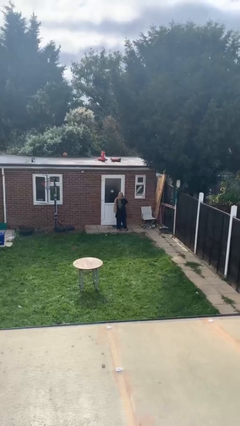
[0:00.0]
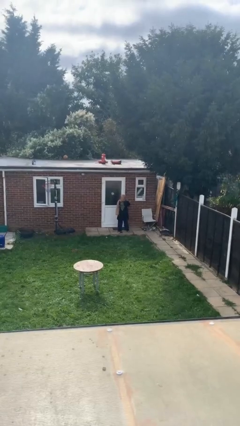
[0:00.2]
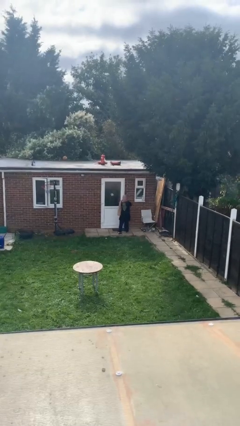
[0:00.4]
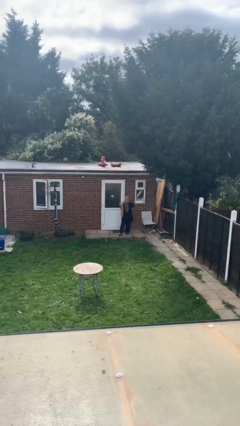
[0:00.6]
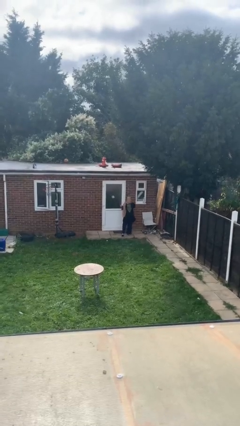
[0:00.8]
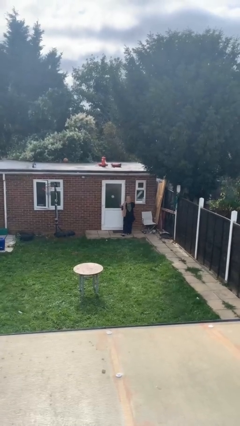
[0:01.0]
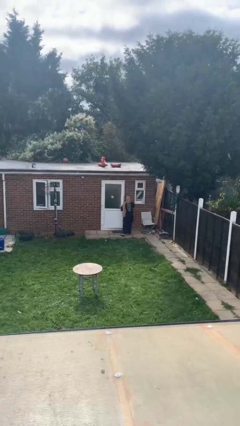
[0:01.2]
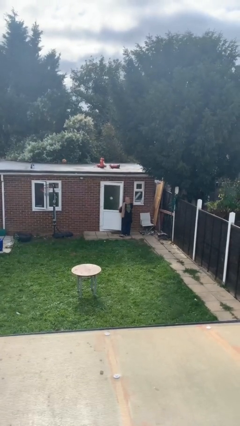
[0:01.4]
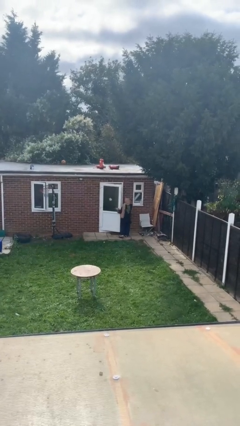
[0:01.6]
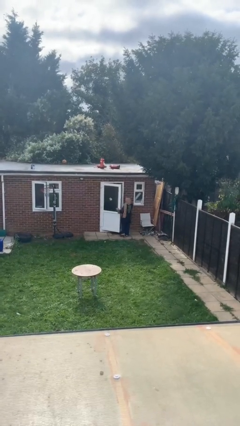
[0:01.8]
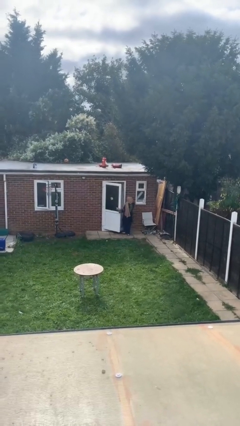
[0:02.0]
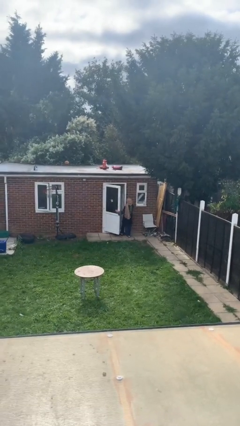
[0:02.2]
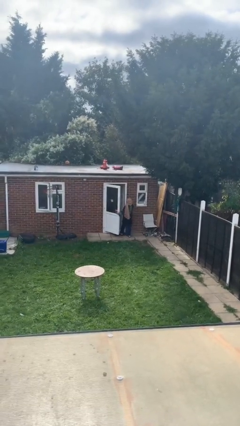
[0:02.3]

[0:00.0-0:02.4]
person opens facility door

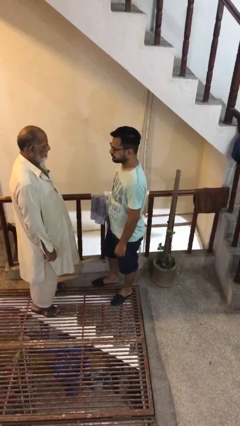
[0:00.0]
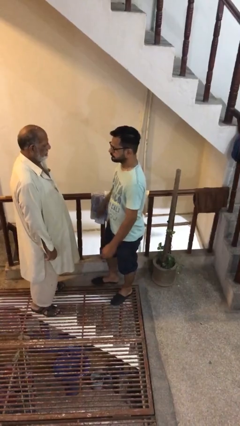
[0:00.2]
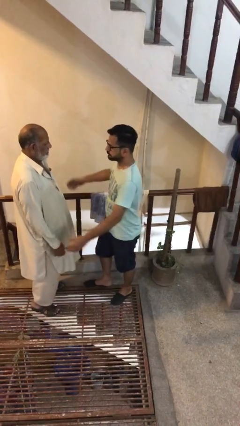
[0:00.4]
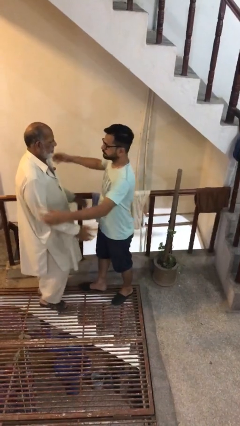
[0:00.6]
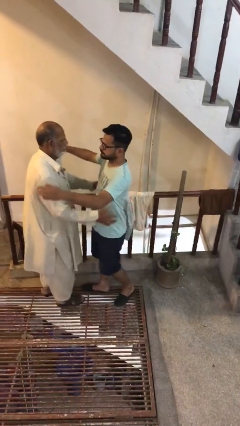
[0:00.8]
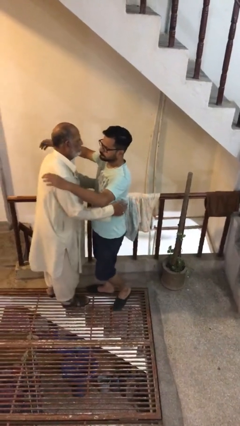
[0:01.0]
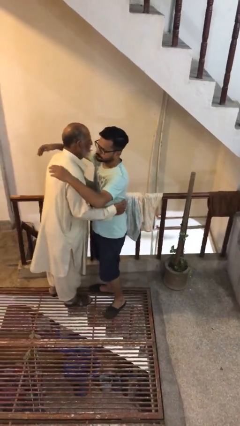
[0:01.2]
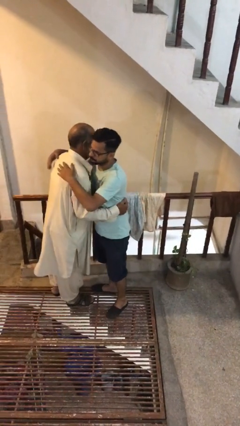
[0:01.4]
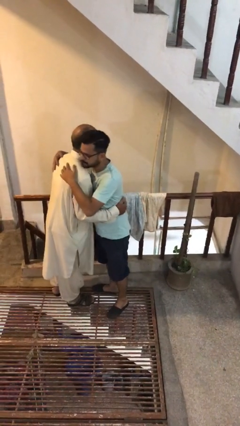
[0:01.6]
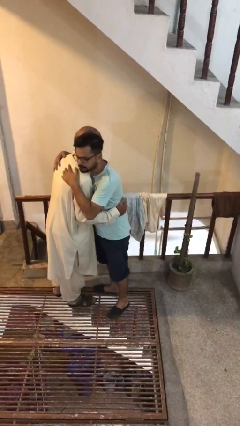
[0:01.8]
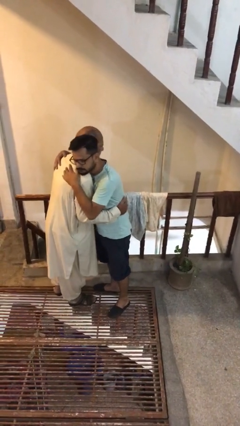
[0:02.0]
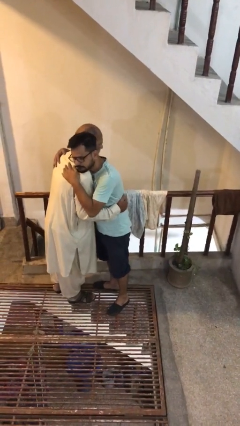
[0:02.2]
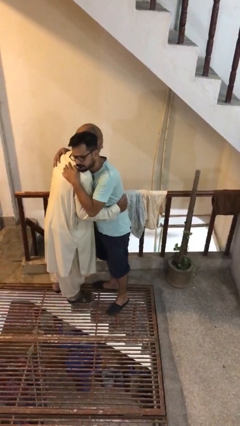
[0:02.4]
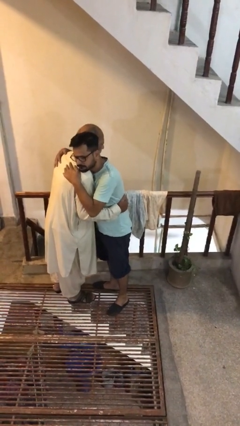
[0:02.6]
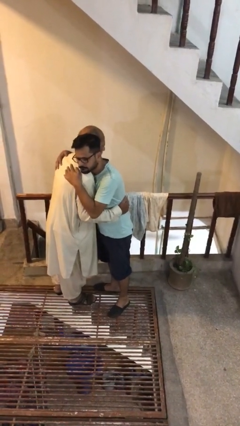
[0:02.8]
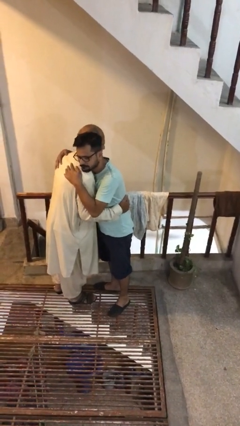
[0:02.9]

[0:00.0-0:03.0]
person embraces person

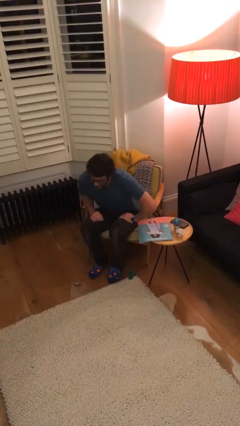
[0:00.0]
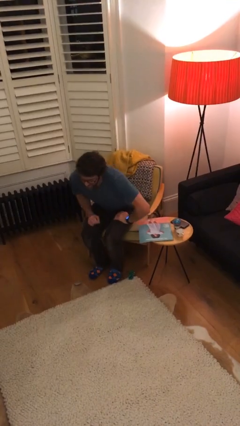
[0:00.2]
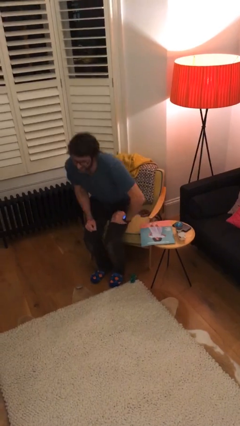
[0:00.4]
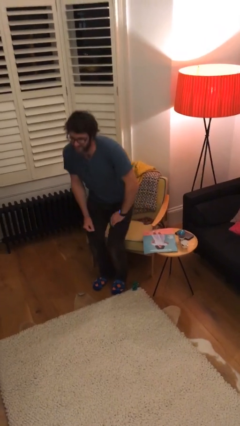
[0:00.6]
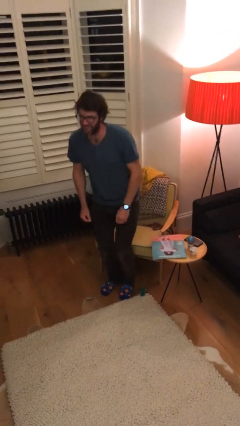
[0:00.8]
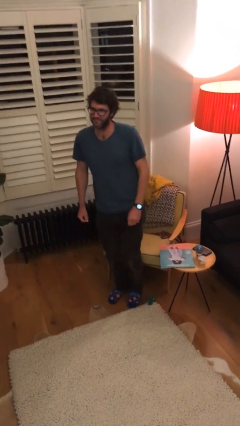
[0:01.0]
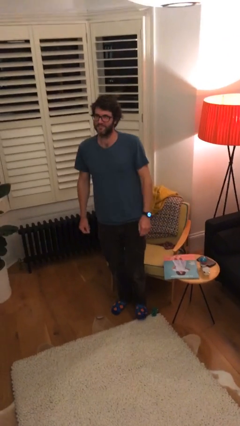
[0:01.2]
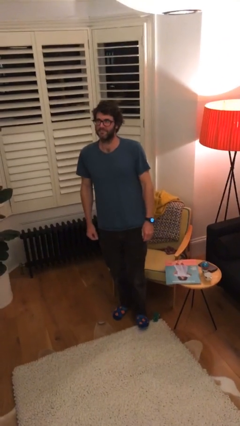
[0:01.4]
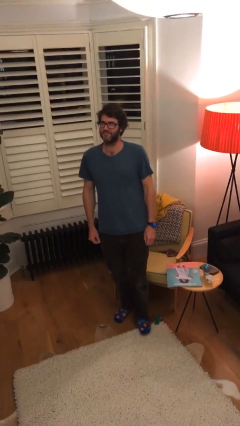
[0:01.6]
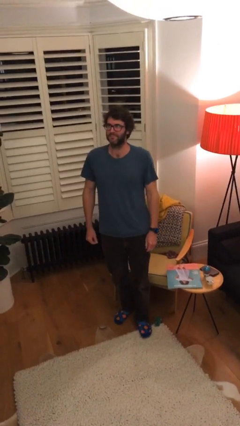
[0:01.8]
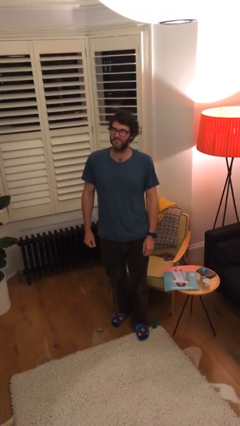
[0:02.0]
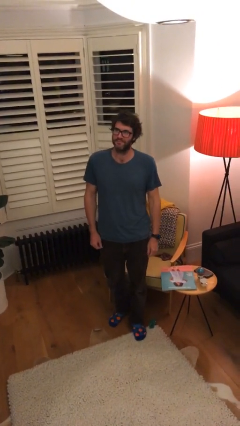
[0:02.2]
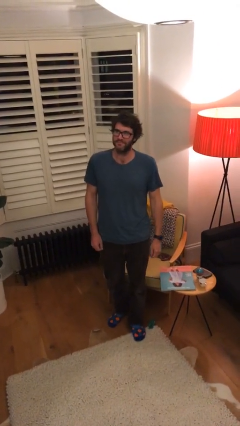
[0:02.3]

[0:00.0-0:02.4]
person stands up

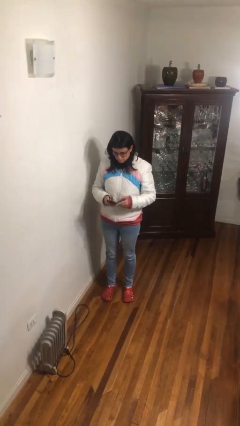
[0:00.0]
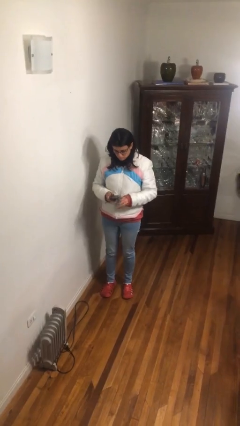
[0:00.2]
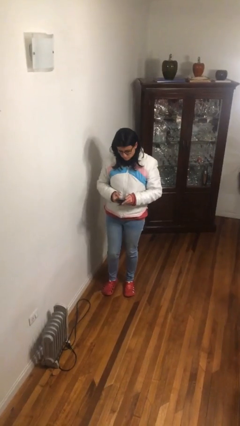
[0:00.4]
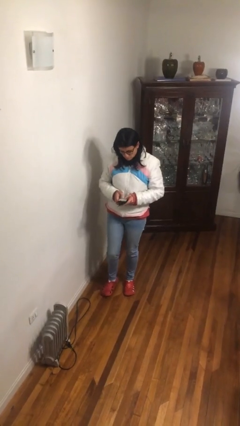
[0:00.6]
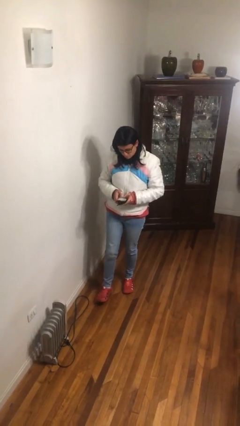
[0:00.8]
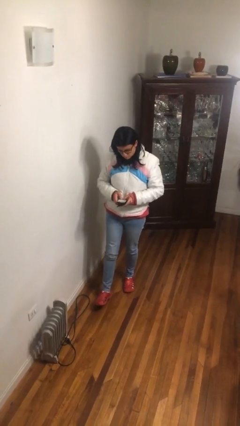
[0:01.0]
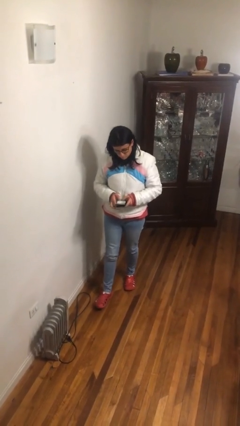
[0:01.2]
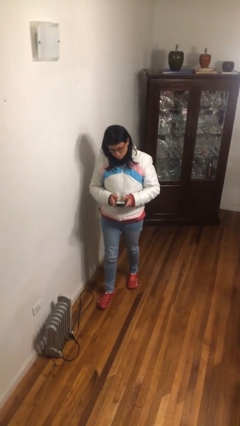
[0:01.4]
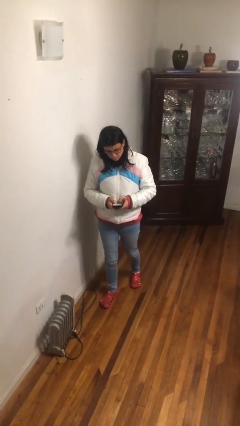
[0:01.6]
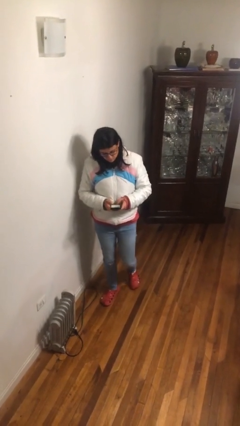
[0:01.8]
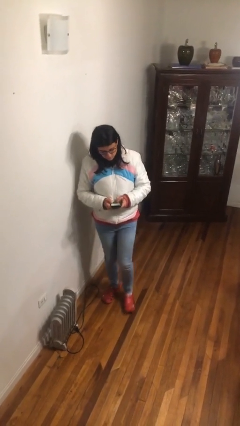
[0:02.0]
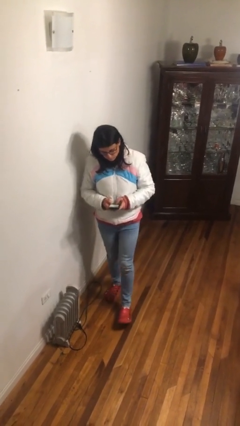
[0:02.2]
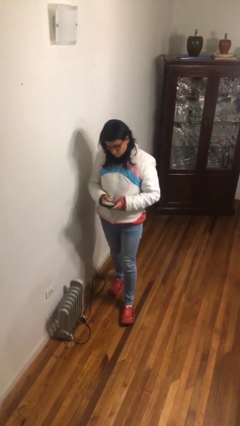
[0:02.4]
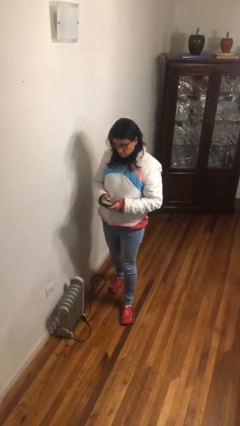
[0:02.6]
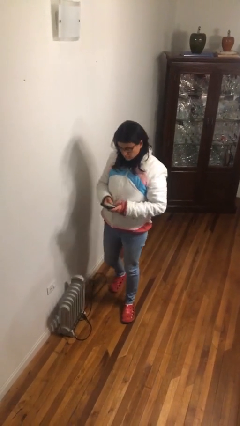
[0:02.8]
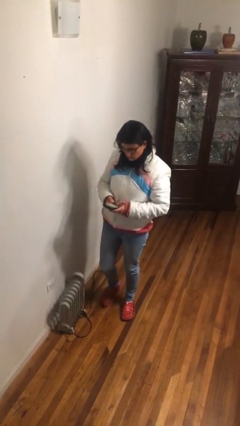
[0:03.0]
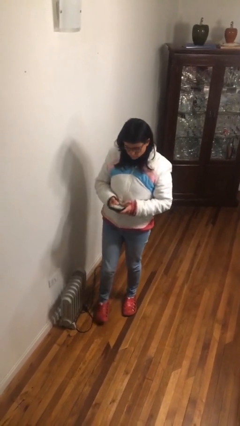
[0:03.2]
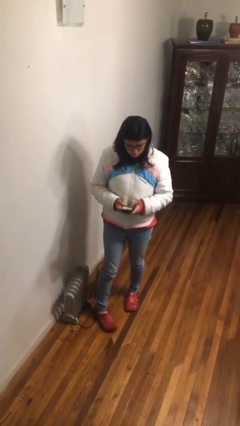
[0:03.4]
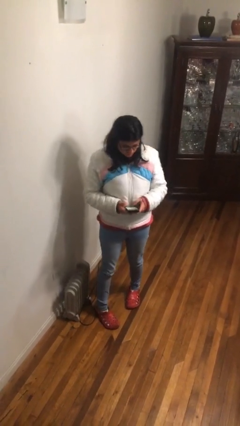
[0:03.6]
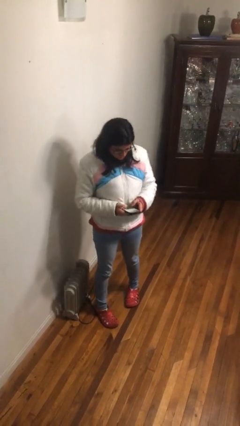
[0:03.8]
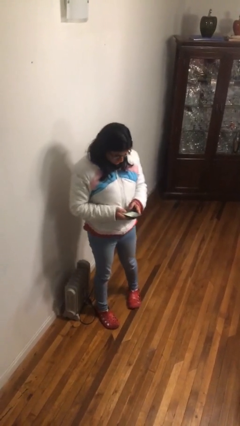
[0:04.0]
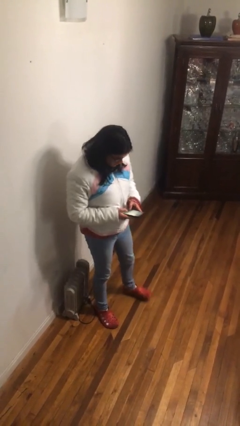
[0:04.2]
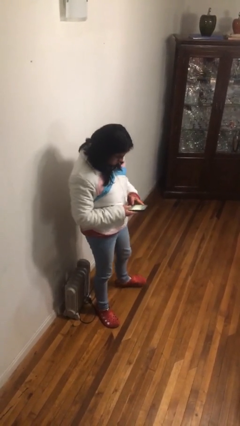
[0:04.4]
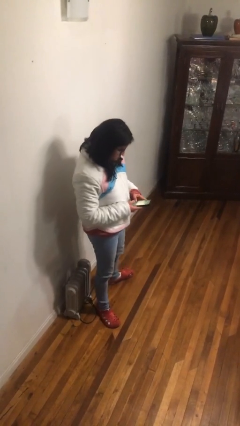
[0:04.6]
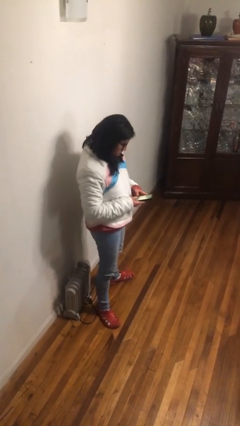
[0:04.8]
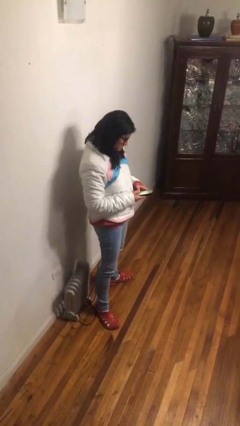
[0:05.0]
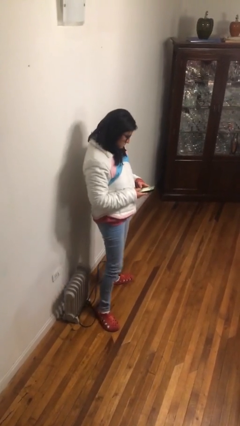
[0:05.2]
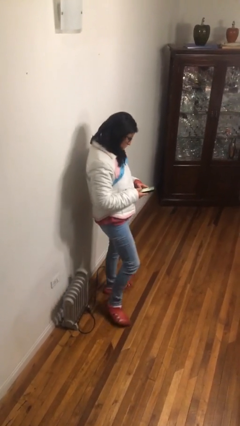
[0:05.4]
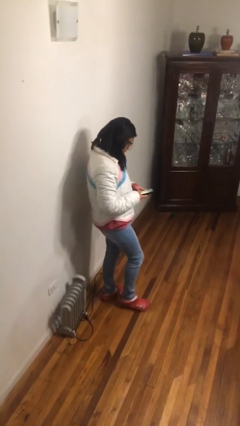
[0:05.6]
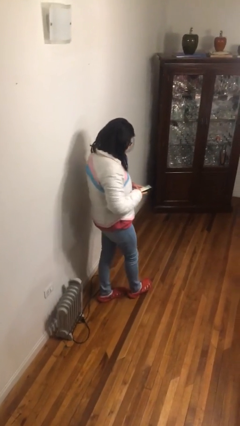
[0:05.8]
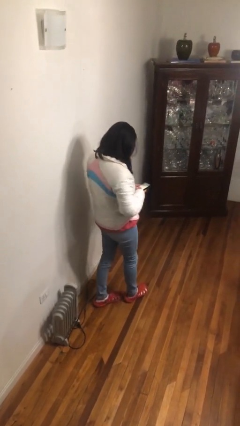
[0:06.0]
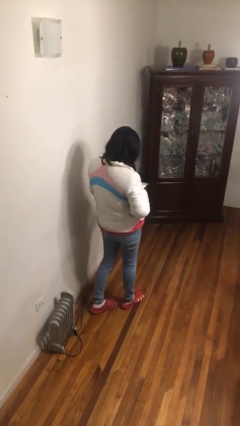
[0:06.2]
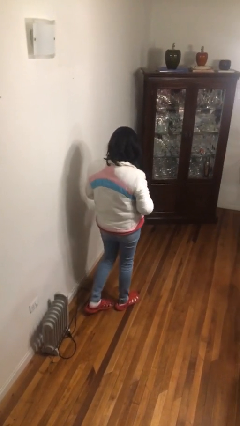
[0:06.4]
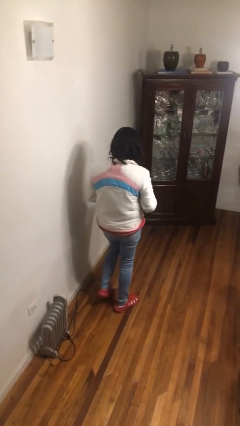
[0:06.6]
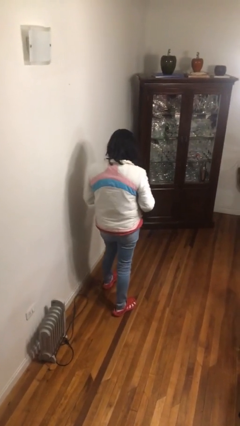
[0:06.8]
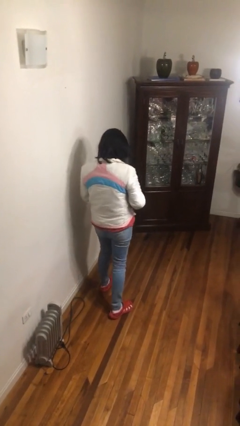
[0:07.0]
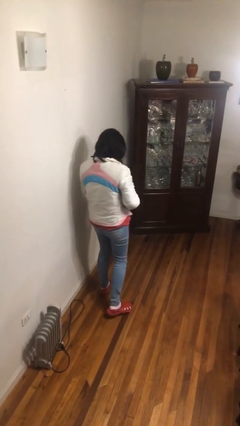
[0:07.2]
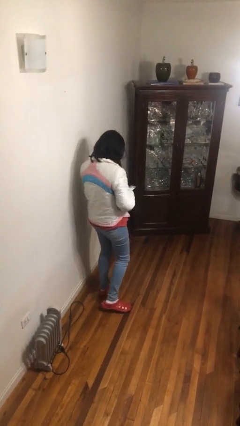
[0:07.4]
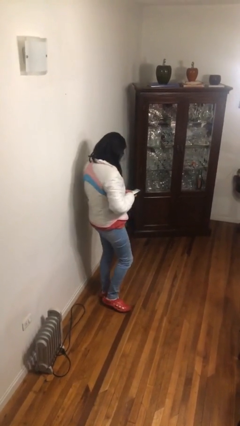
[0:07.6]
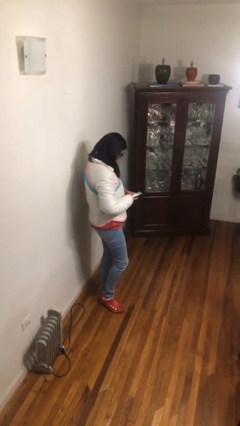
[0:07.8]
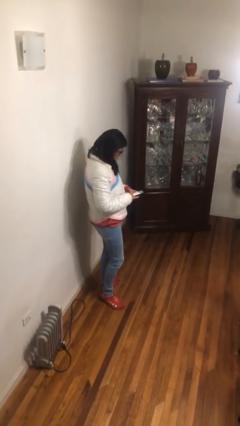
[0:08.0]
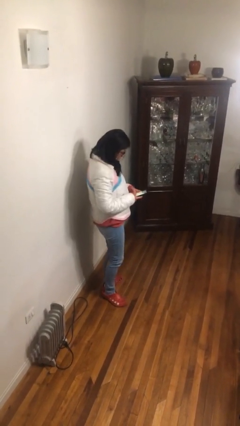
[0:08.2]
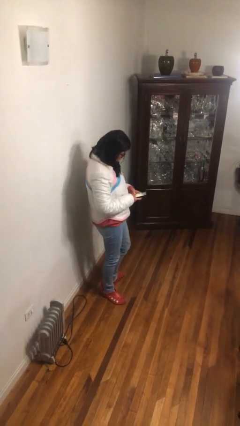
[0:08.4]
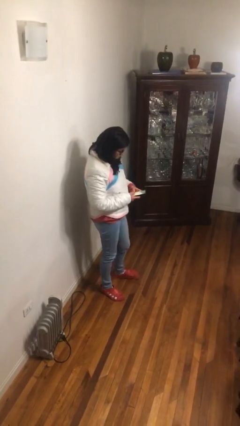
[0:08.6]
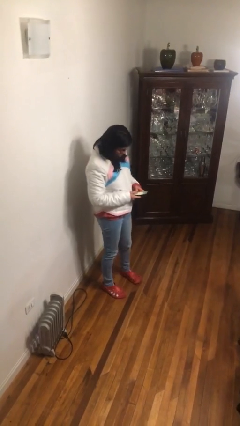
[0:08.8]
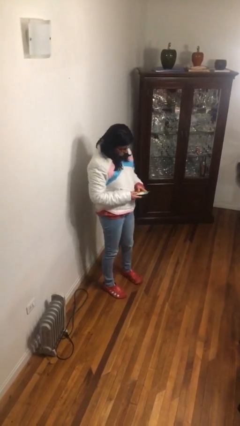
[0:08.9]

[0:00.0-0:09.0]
person texts on phone

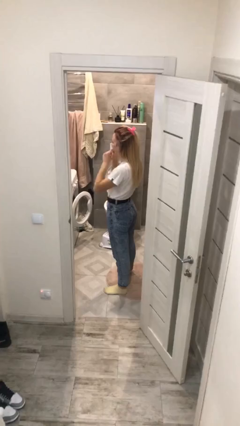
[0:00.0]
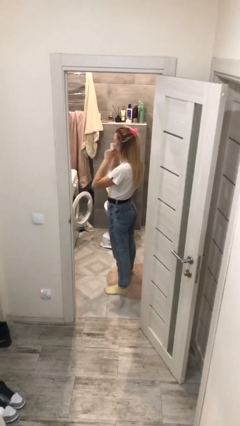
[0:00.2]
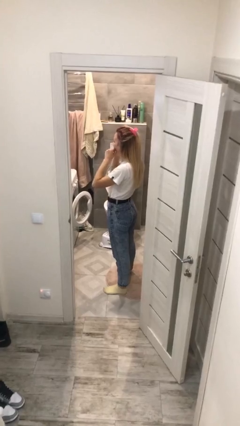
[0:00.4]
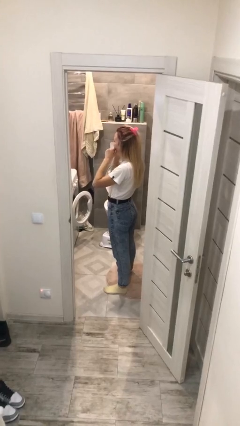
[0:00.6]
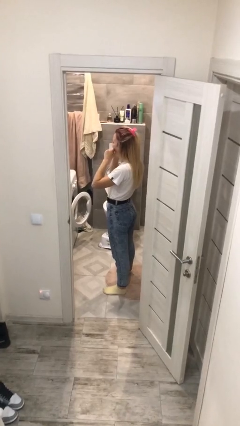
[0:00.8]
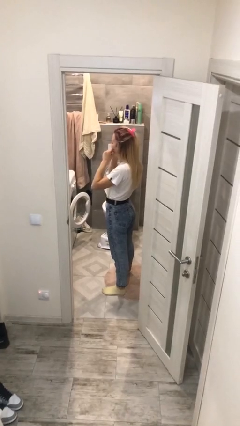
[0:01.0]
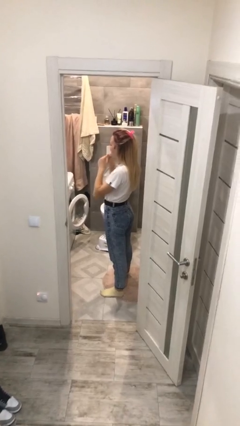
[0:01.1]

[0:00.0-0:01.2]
person flosses
